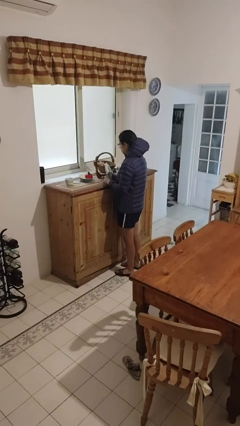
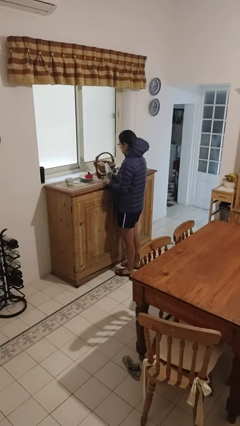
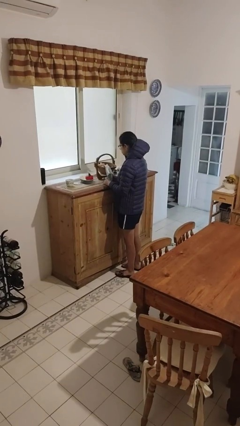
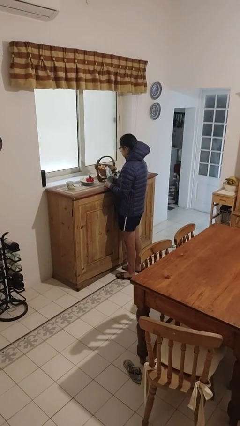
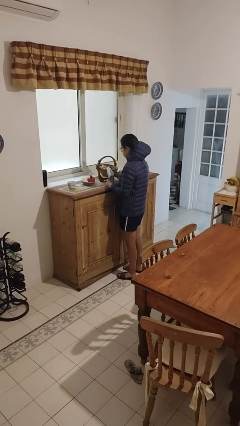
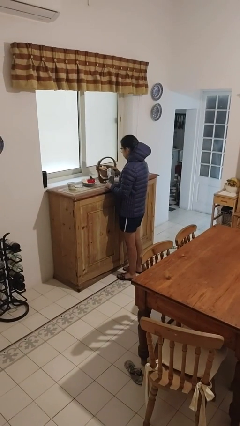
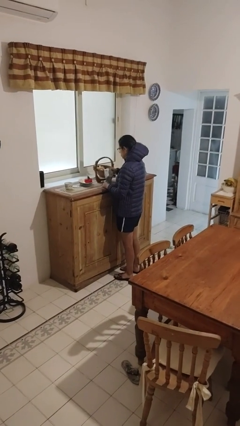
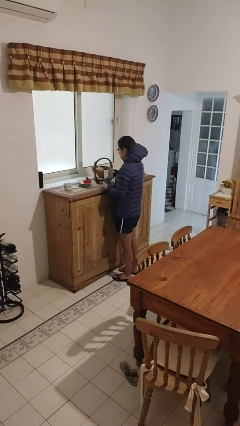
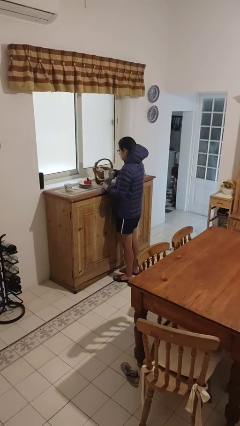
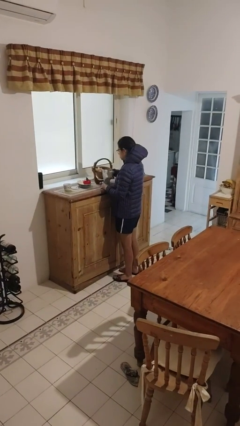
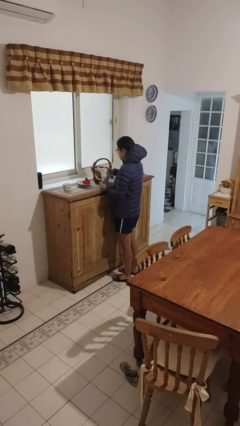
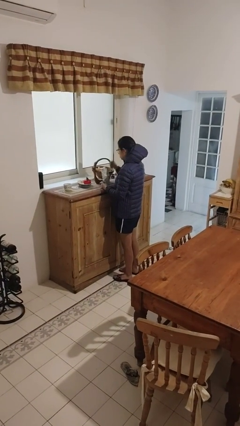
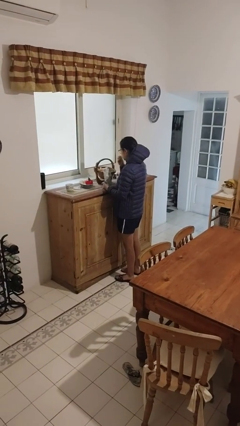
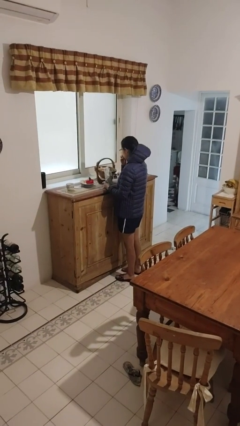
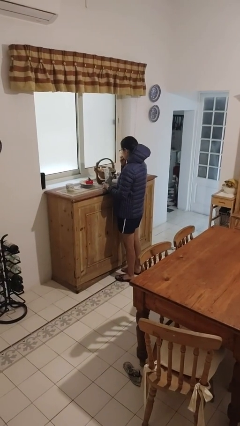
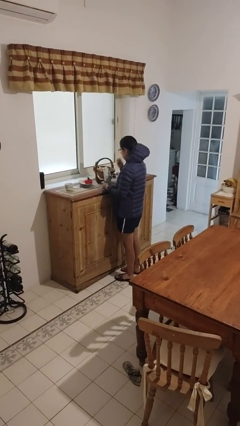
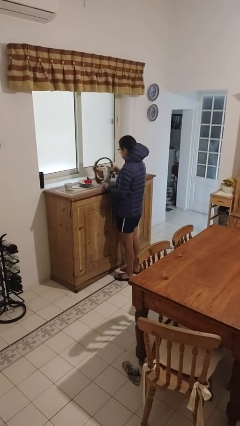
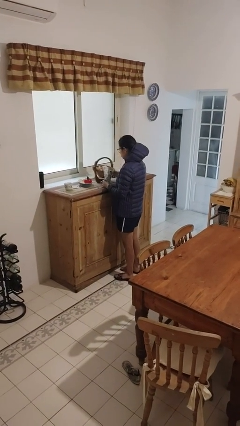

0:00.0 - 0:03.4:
person eats snack from bag

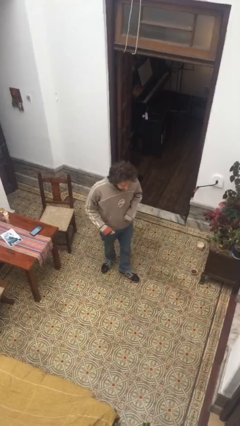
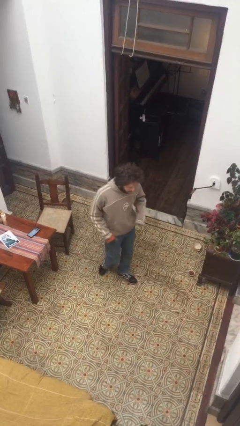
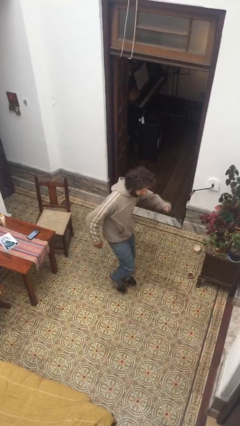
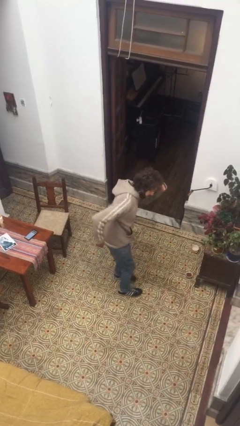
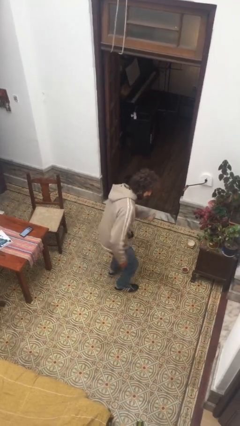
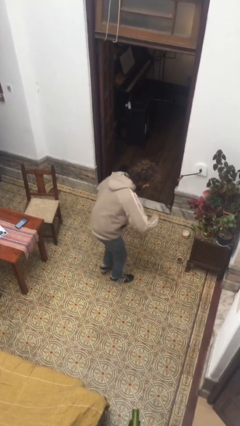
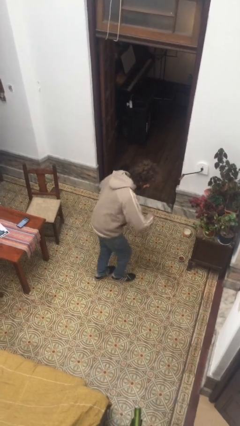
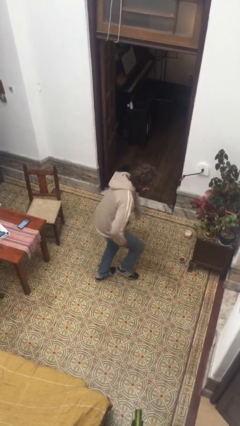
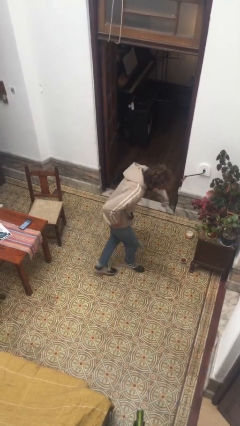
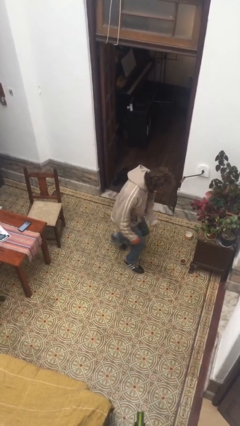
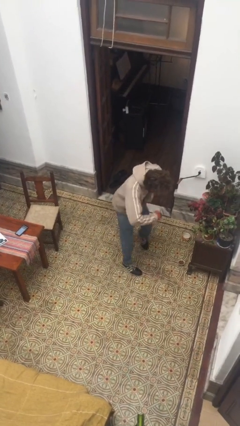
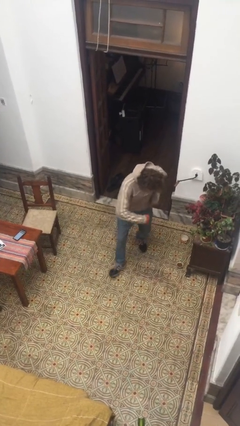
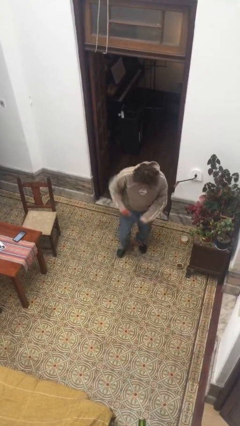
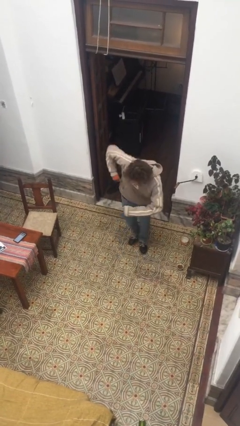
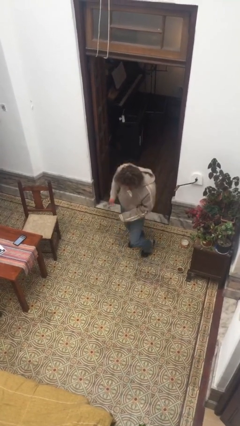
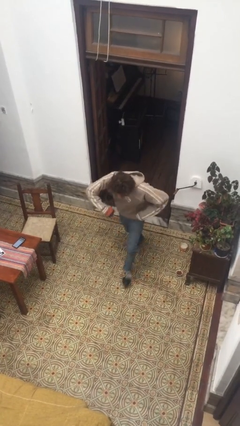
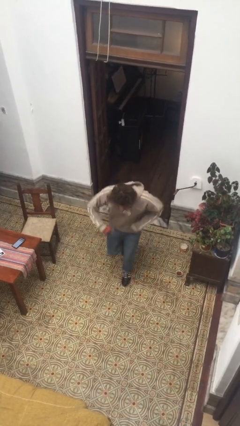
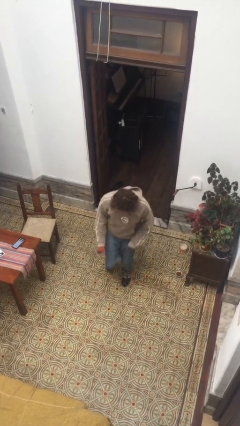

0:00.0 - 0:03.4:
person dances in place

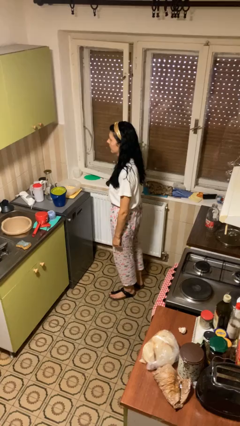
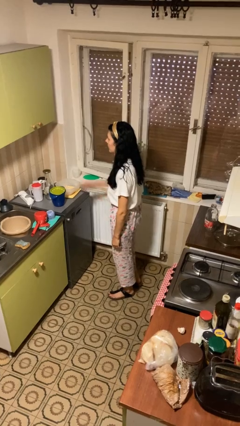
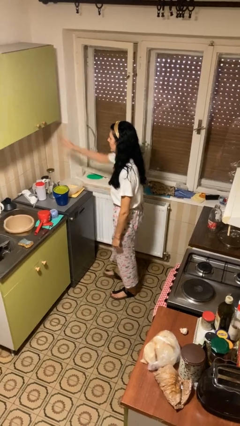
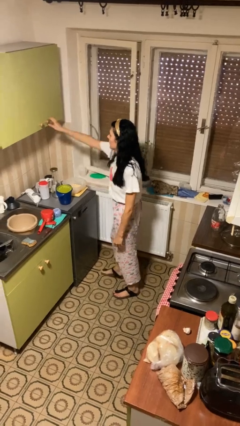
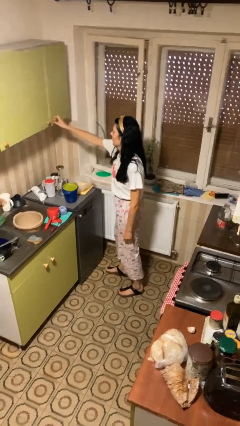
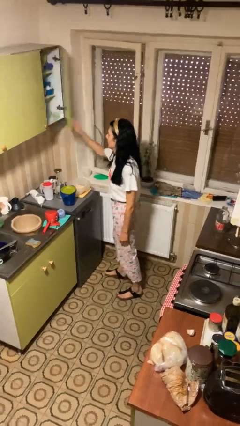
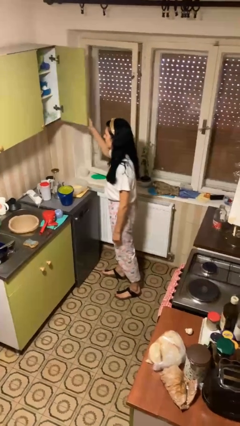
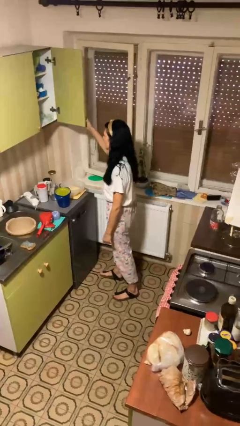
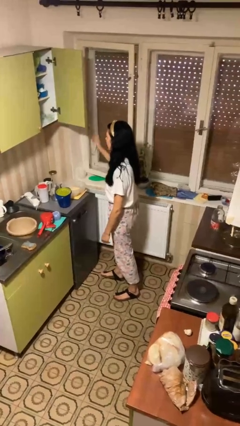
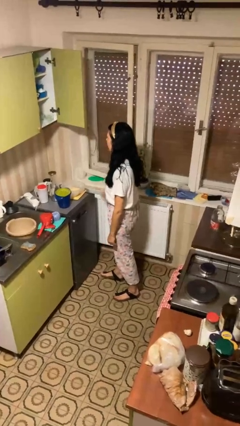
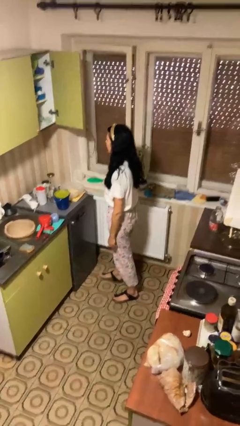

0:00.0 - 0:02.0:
person opens cabinet

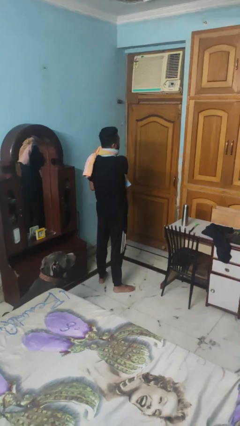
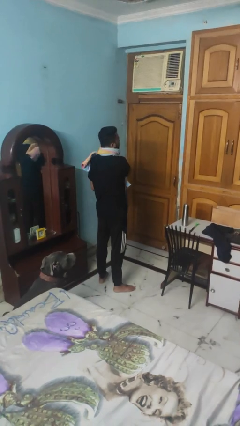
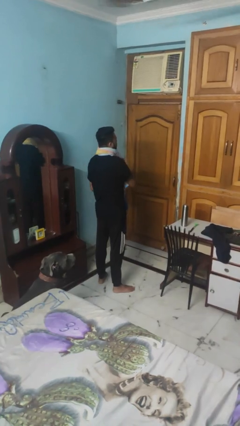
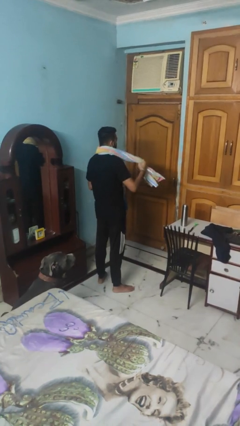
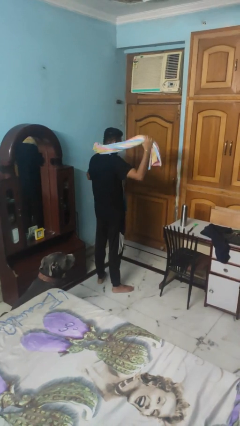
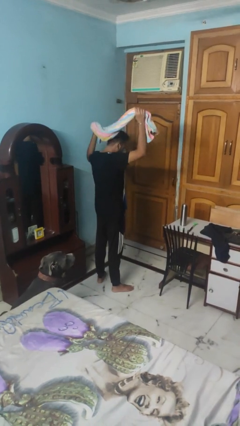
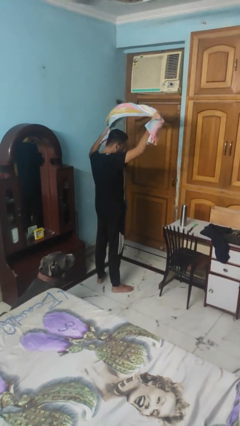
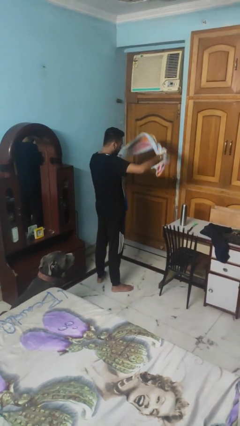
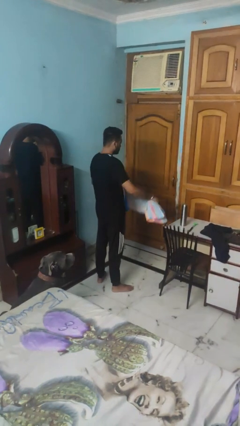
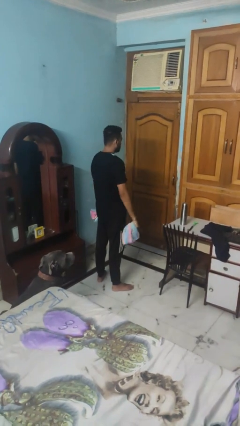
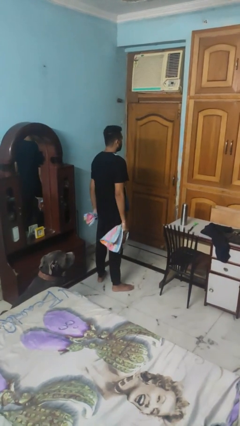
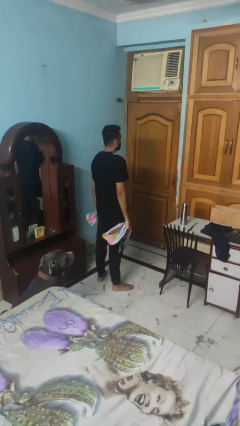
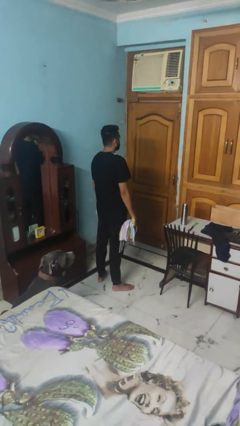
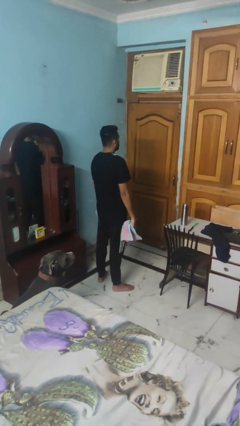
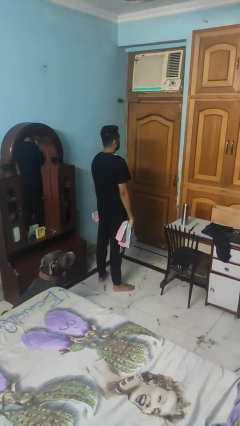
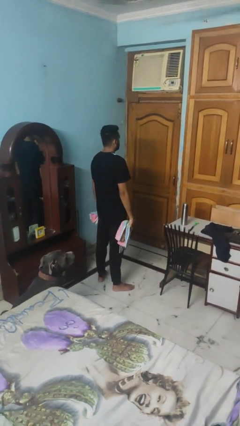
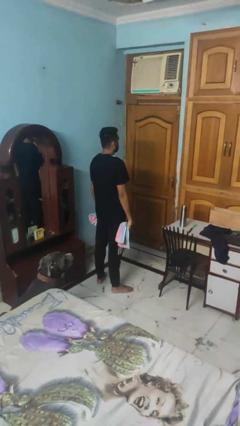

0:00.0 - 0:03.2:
person takes off scarf

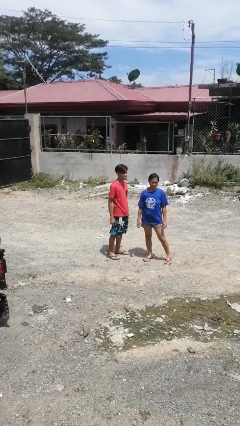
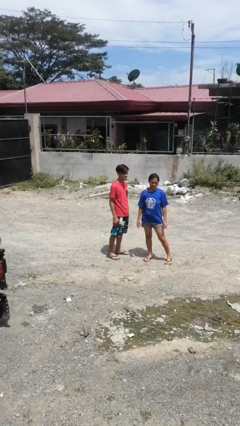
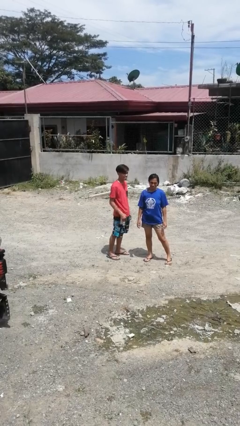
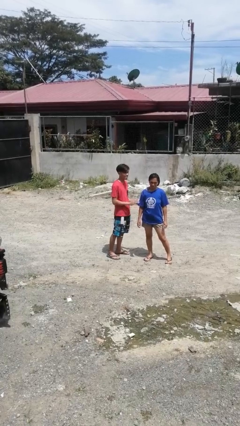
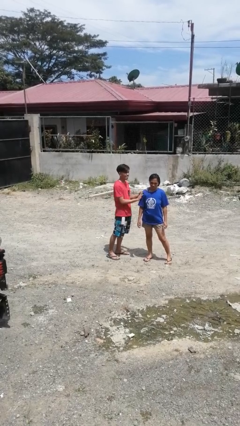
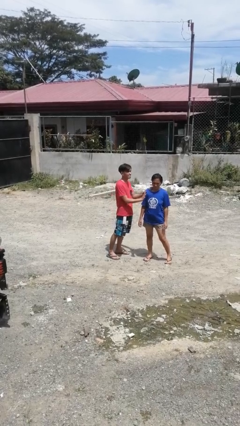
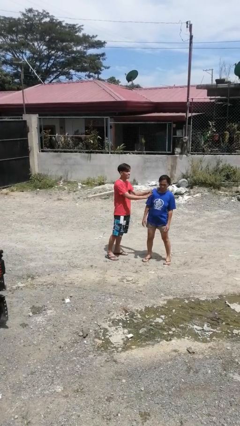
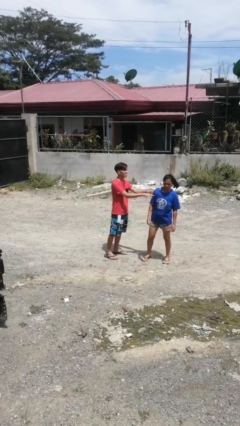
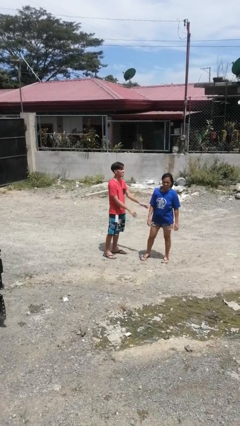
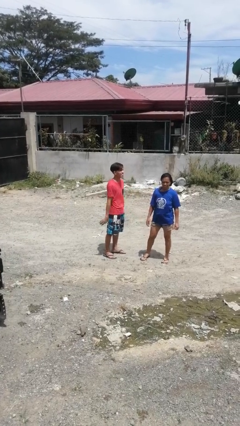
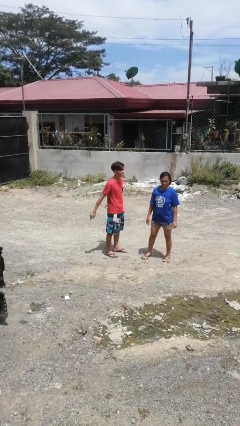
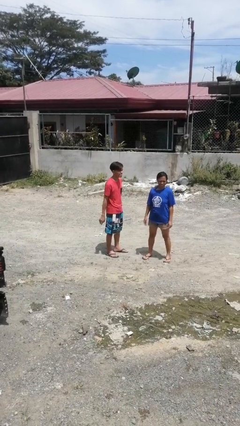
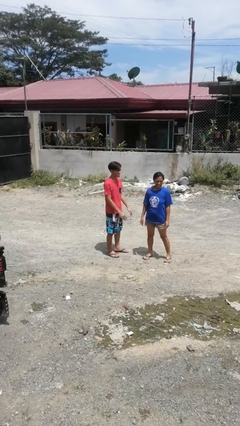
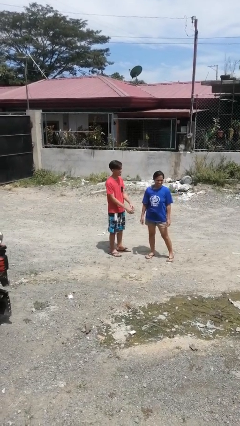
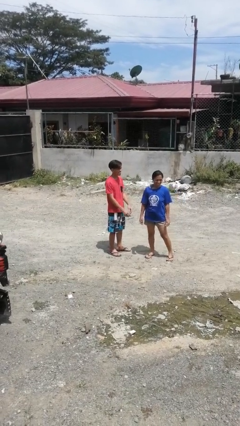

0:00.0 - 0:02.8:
person shoves person

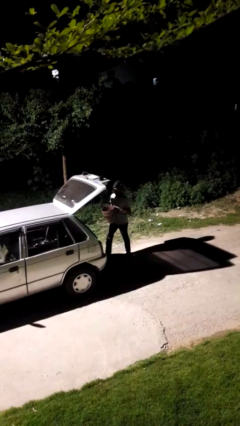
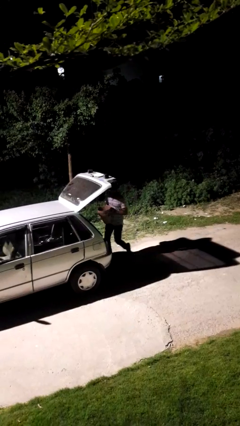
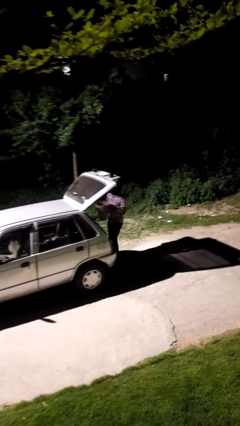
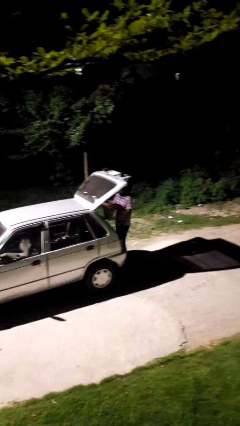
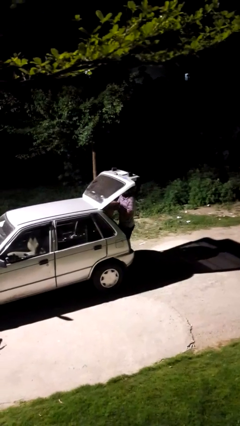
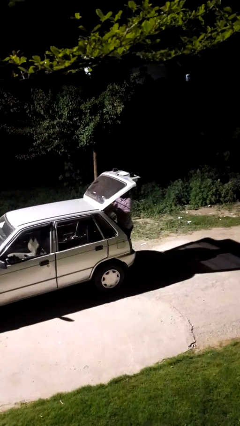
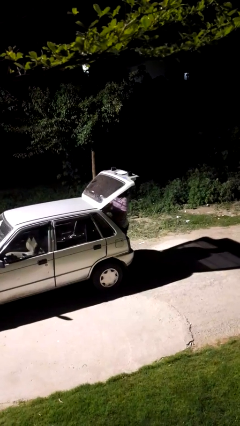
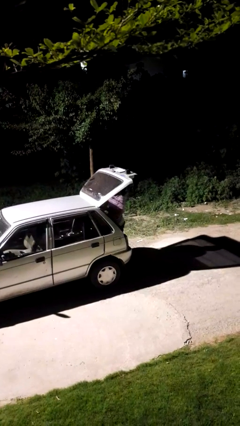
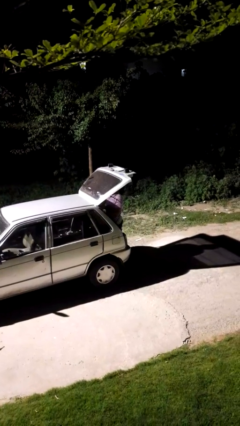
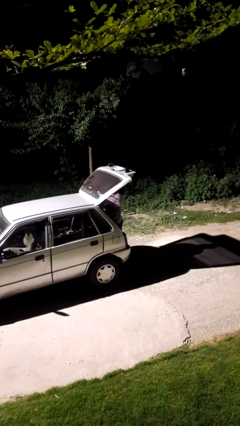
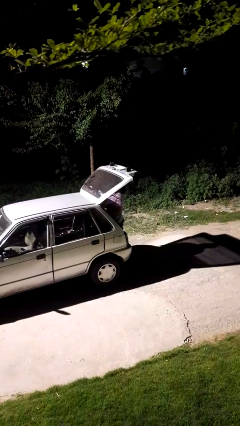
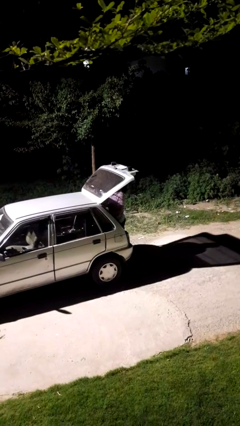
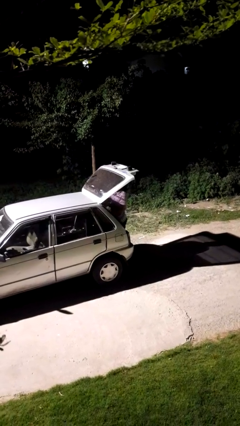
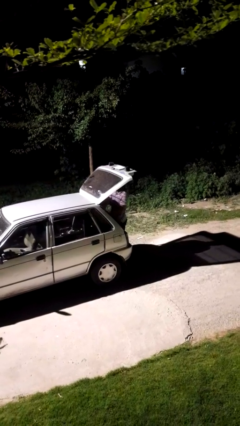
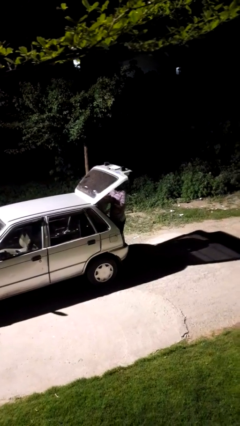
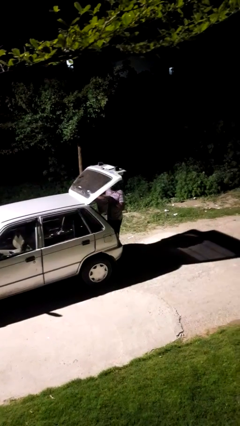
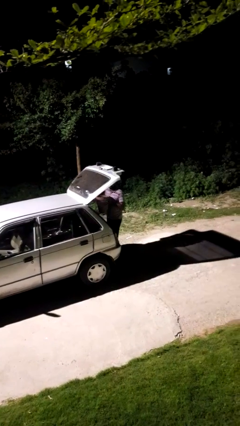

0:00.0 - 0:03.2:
person loads car
